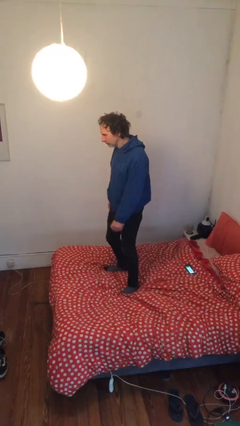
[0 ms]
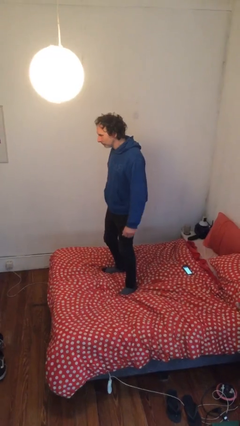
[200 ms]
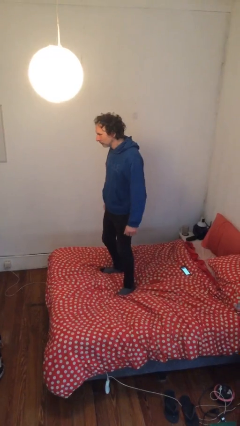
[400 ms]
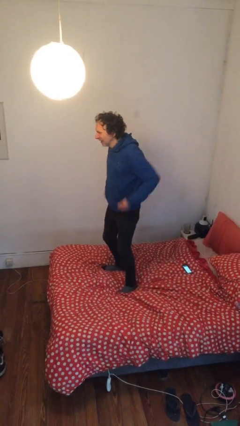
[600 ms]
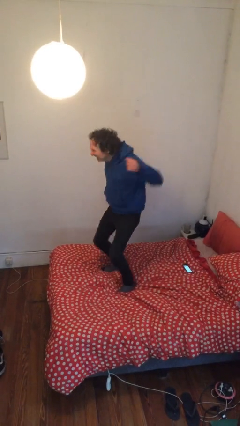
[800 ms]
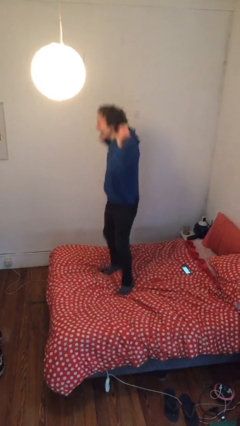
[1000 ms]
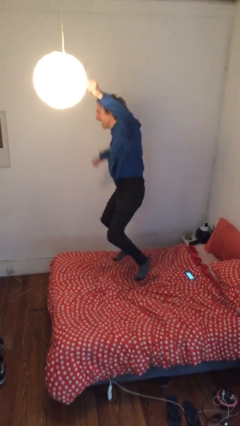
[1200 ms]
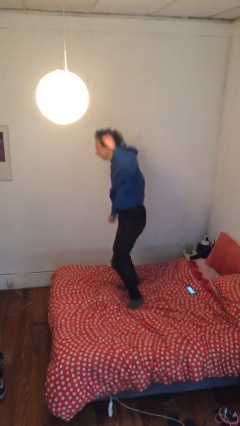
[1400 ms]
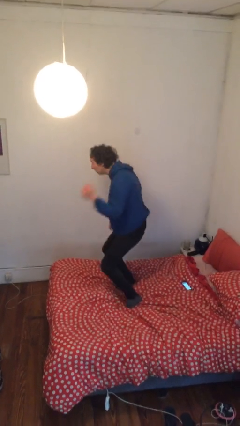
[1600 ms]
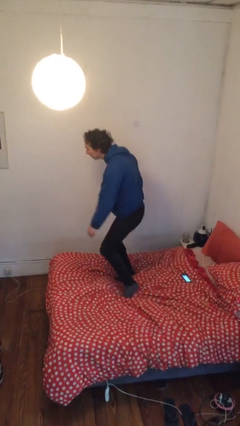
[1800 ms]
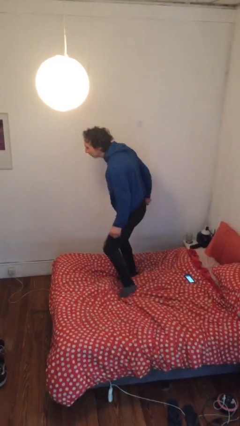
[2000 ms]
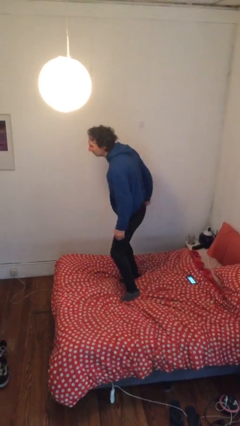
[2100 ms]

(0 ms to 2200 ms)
person jumps on bed

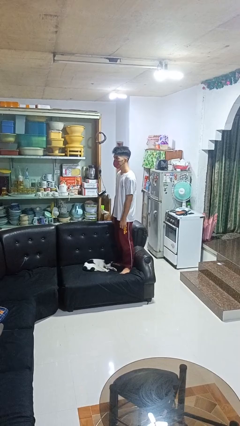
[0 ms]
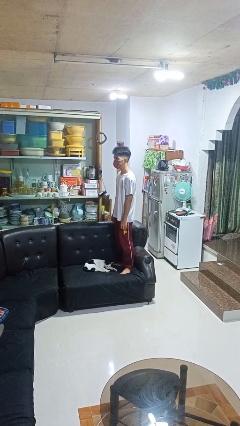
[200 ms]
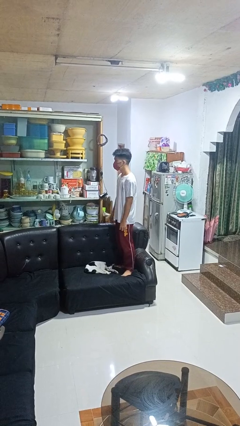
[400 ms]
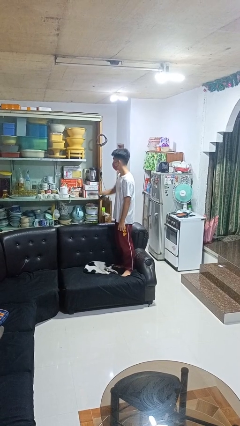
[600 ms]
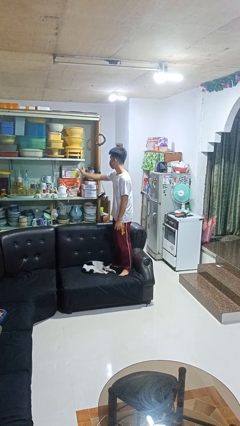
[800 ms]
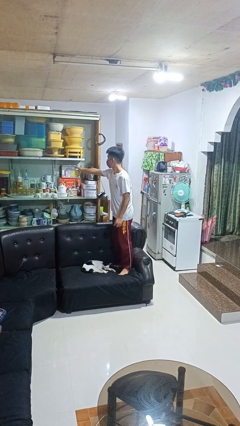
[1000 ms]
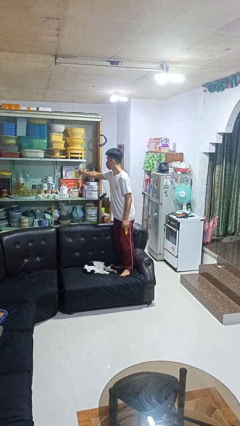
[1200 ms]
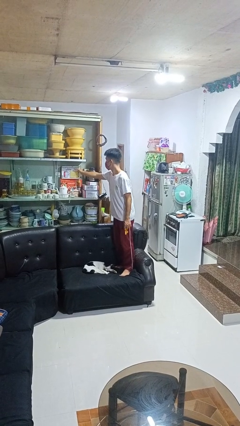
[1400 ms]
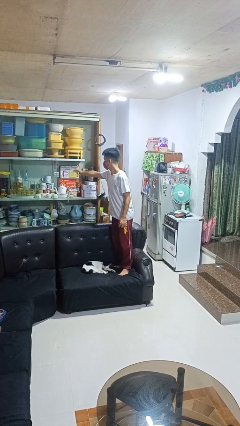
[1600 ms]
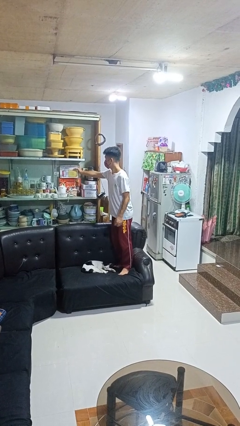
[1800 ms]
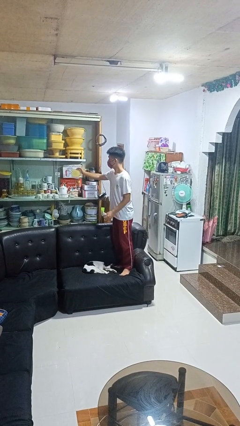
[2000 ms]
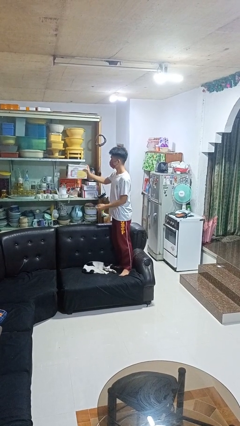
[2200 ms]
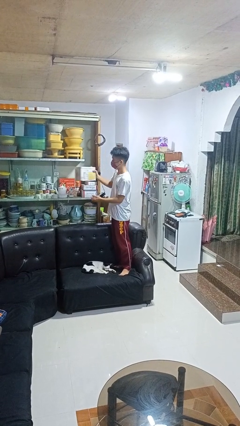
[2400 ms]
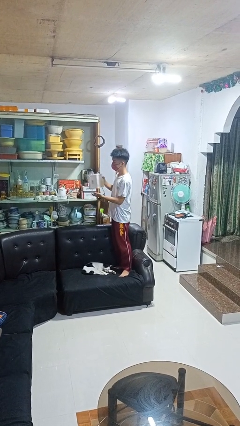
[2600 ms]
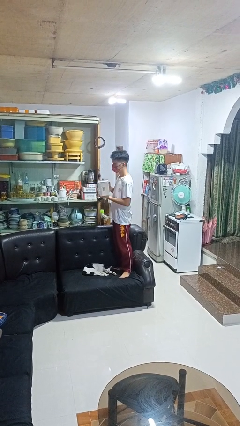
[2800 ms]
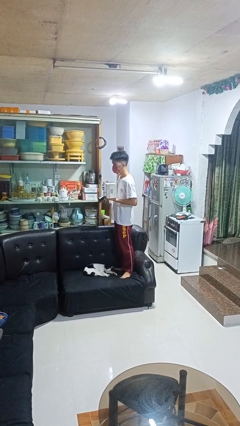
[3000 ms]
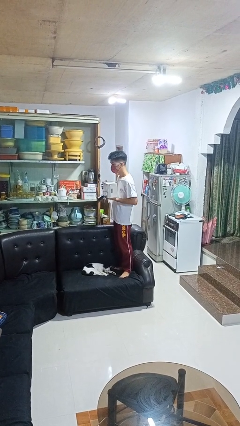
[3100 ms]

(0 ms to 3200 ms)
person picks up object from cabinet

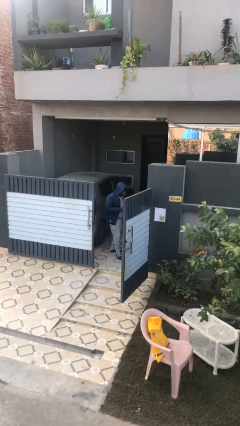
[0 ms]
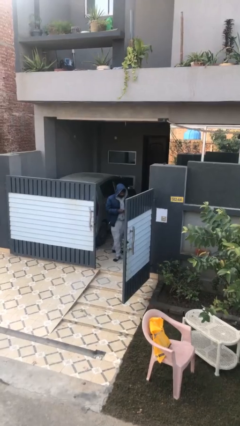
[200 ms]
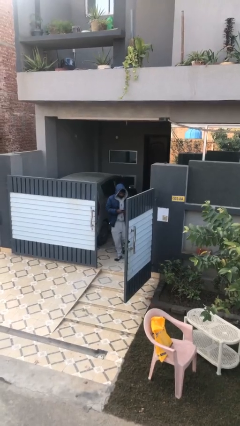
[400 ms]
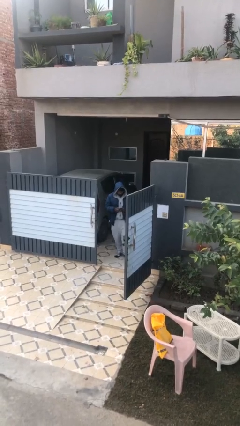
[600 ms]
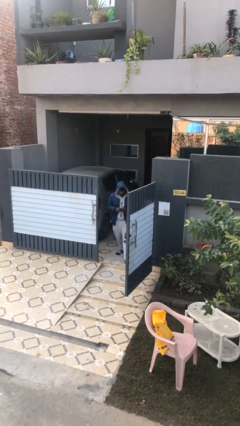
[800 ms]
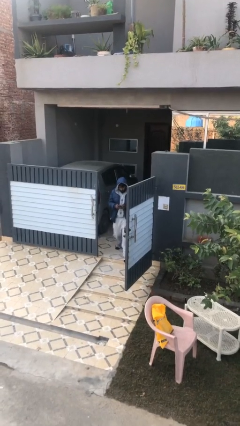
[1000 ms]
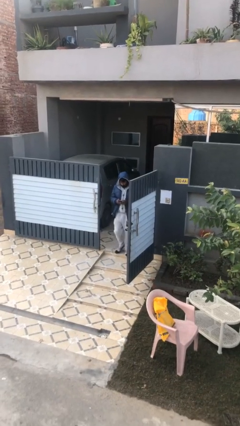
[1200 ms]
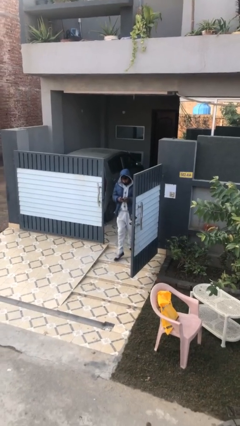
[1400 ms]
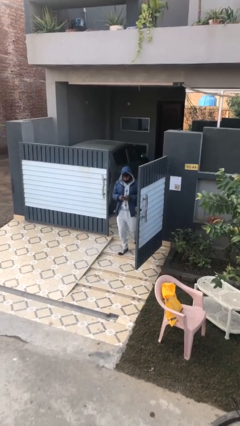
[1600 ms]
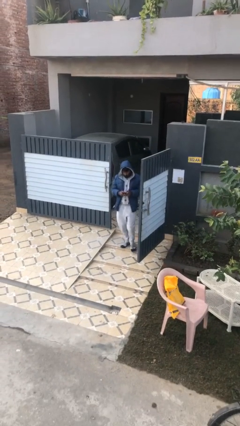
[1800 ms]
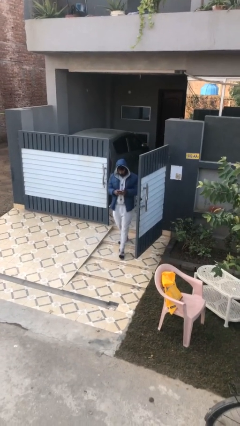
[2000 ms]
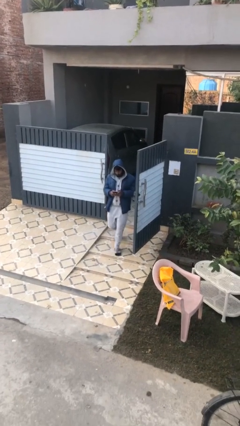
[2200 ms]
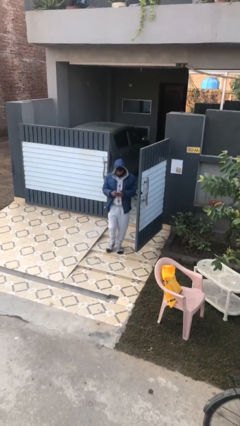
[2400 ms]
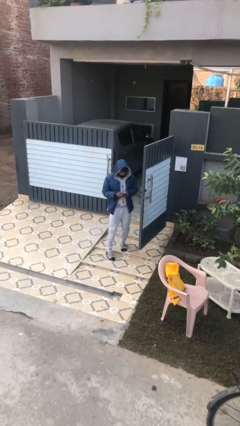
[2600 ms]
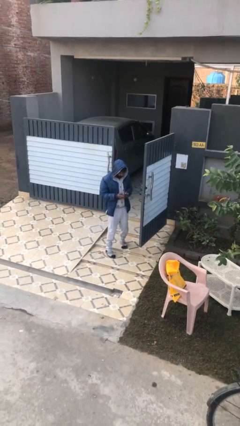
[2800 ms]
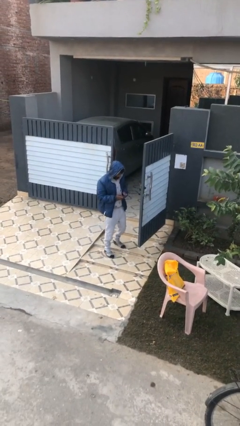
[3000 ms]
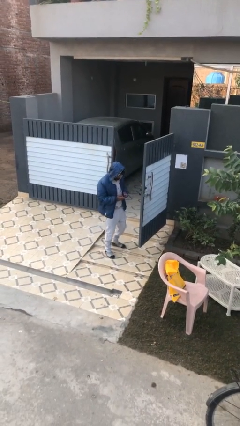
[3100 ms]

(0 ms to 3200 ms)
person enters scene through structure

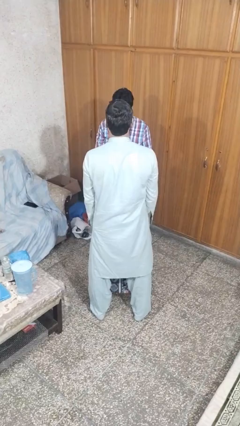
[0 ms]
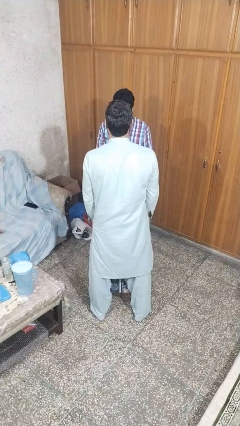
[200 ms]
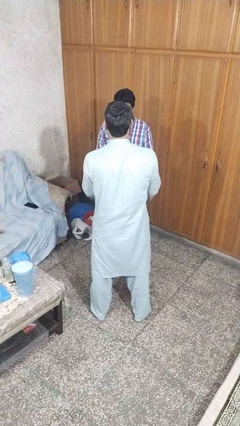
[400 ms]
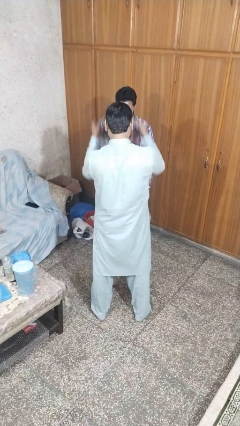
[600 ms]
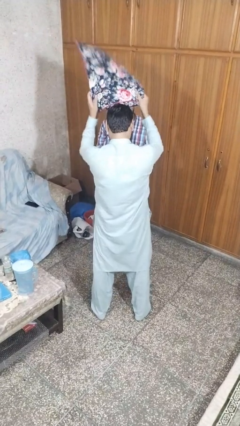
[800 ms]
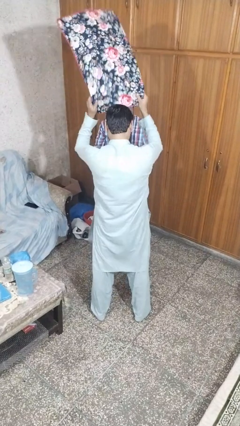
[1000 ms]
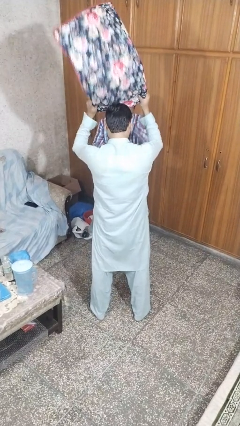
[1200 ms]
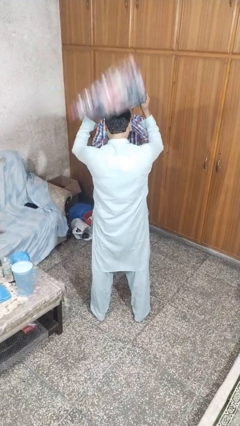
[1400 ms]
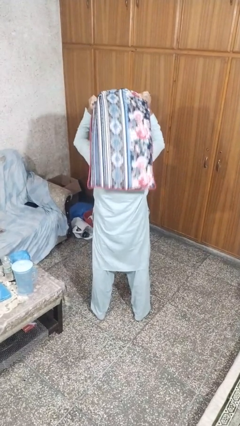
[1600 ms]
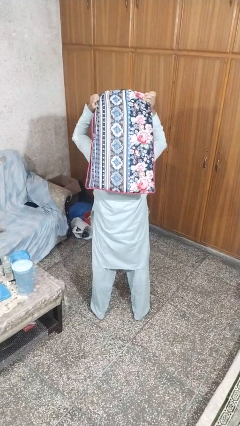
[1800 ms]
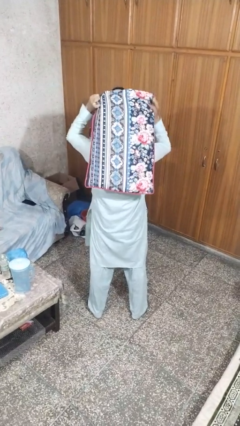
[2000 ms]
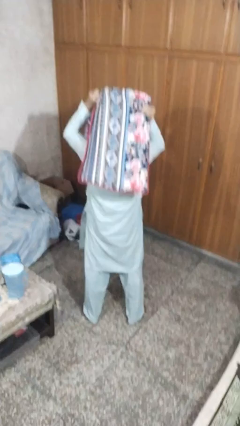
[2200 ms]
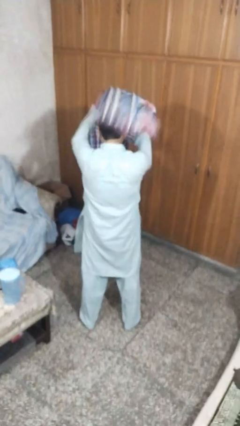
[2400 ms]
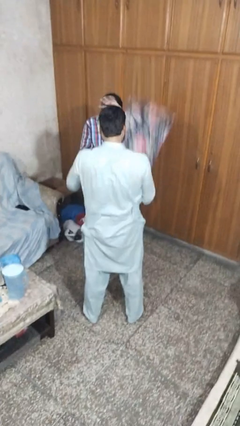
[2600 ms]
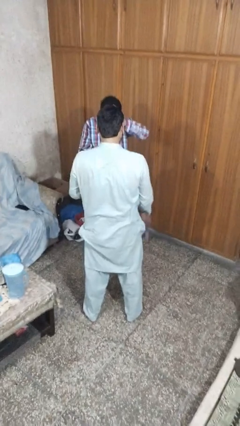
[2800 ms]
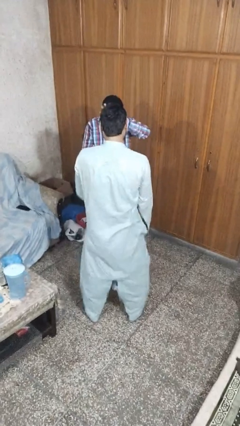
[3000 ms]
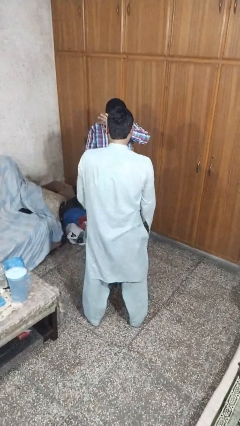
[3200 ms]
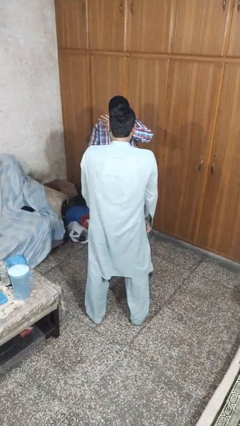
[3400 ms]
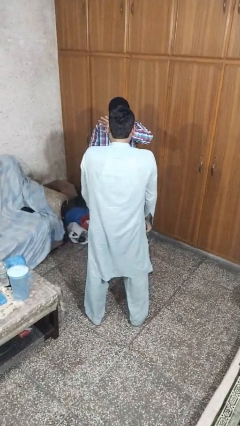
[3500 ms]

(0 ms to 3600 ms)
person hits person with pillow

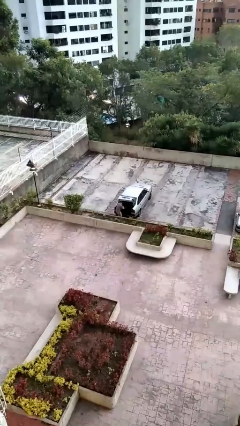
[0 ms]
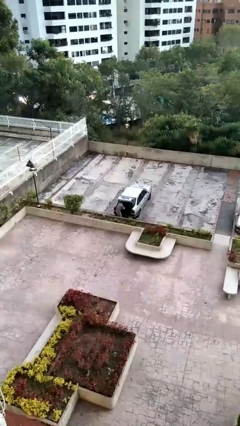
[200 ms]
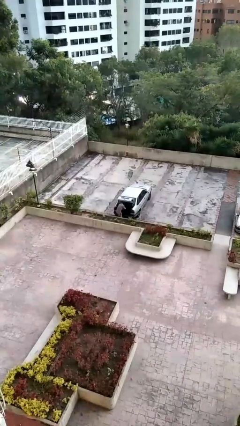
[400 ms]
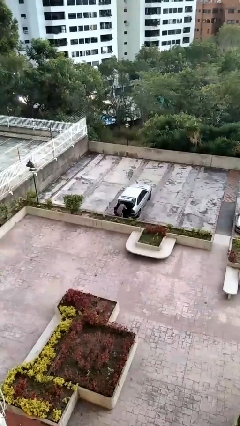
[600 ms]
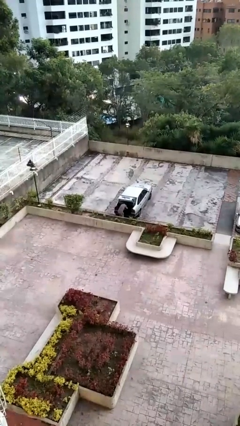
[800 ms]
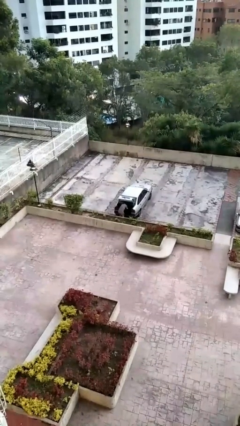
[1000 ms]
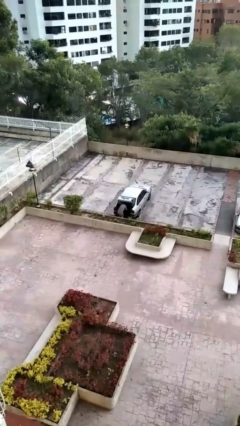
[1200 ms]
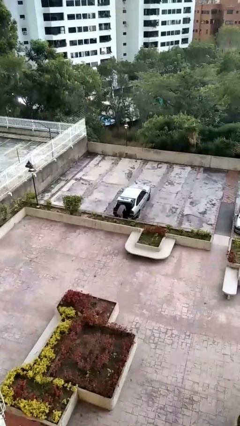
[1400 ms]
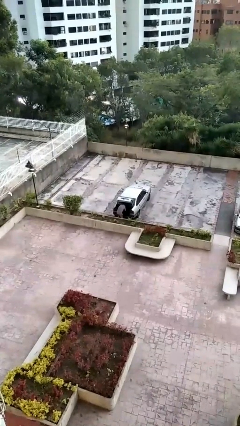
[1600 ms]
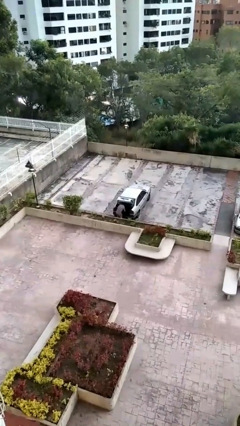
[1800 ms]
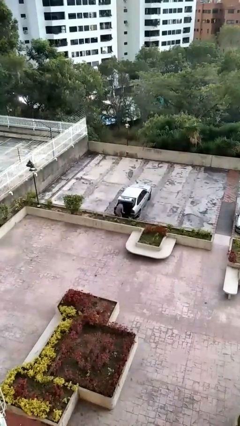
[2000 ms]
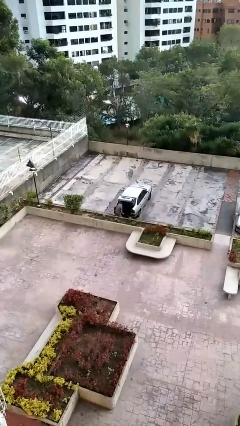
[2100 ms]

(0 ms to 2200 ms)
person loads car

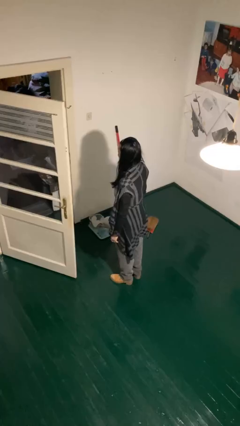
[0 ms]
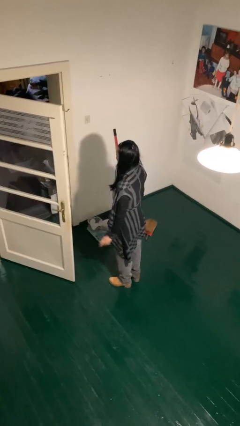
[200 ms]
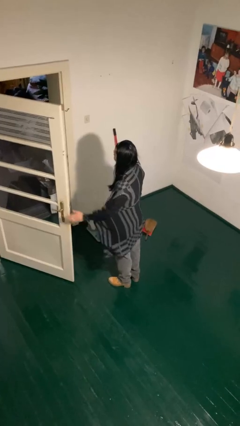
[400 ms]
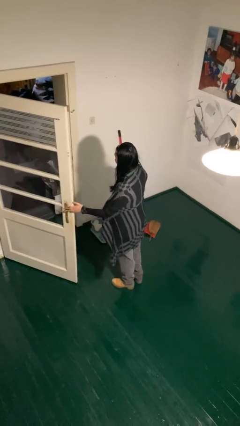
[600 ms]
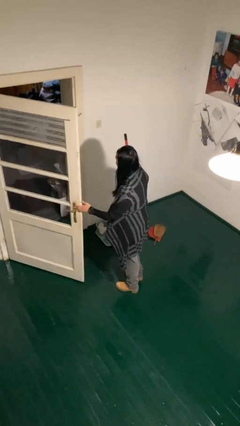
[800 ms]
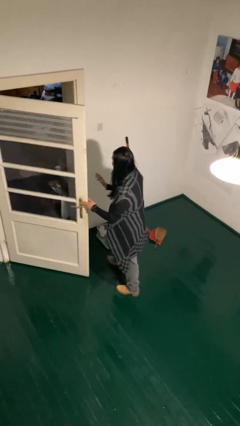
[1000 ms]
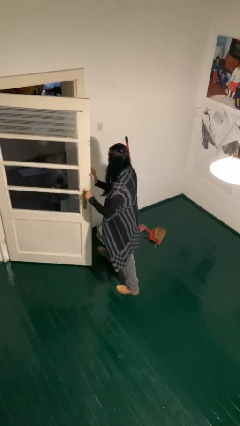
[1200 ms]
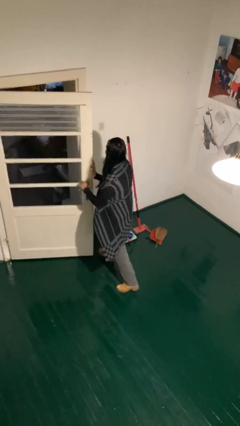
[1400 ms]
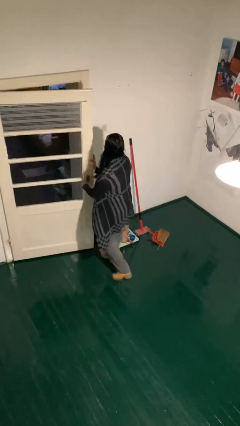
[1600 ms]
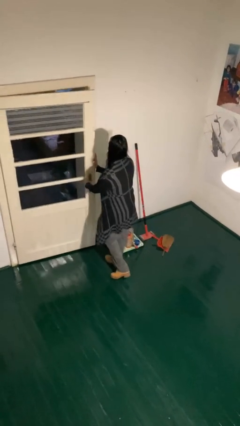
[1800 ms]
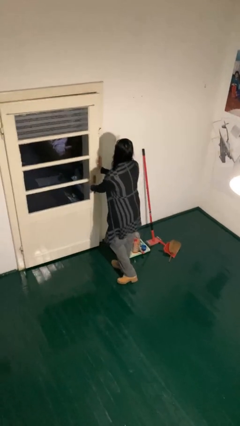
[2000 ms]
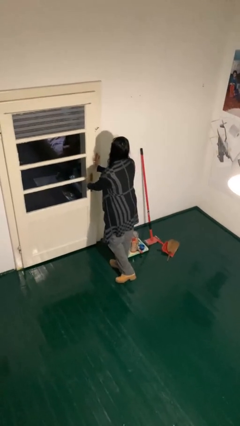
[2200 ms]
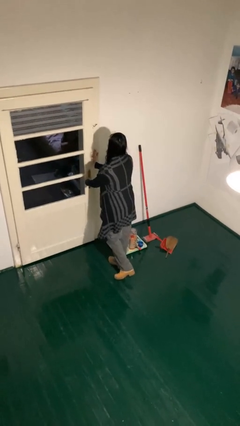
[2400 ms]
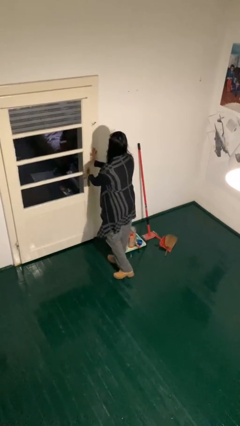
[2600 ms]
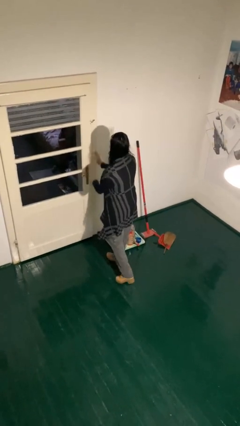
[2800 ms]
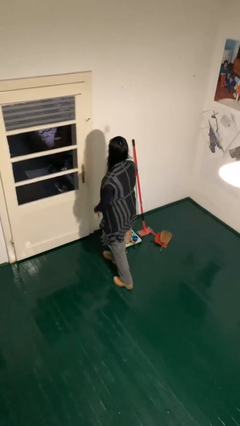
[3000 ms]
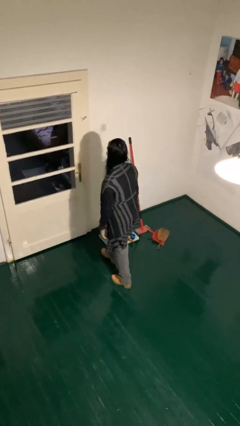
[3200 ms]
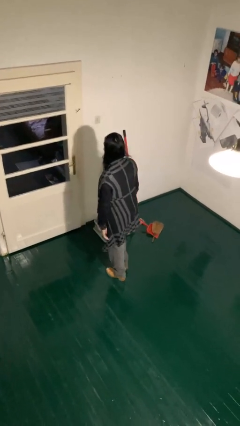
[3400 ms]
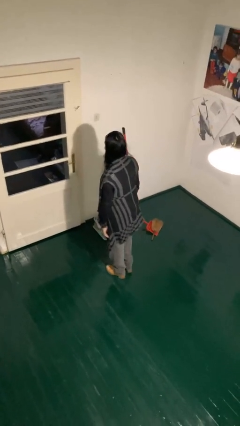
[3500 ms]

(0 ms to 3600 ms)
person closes facility door
